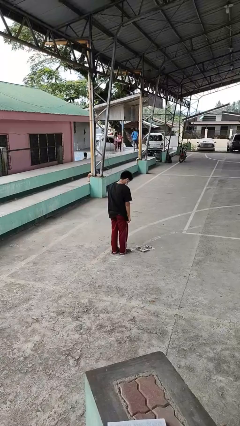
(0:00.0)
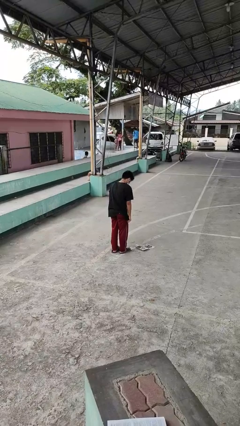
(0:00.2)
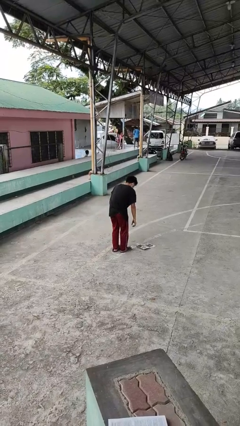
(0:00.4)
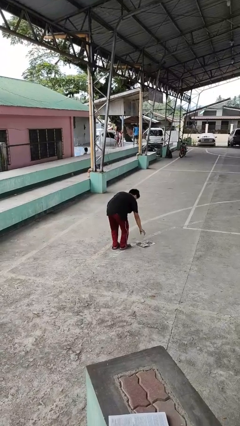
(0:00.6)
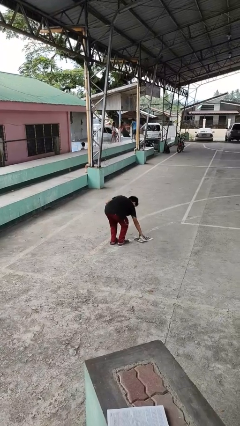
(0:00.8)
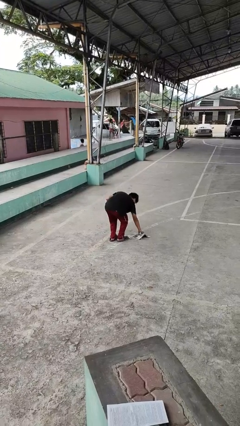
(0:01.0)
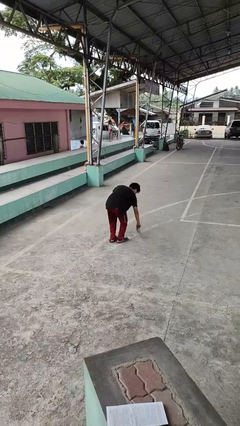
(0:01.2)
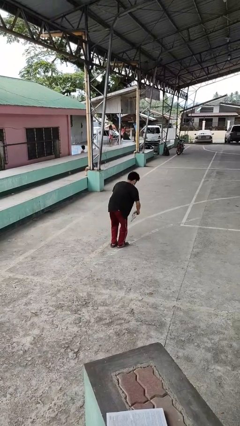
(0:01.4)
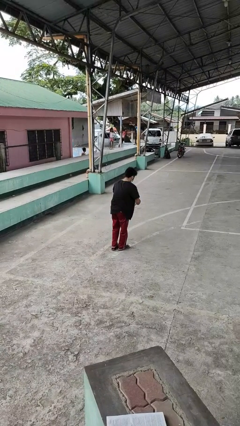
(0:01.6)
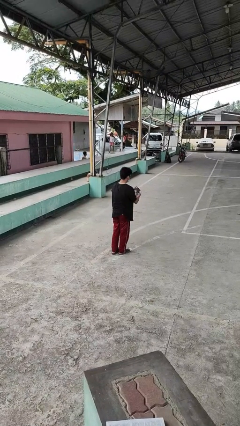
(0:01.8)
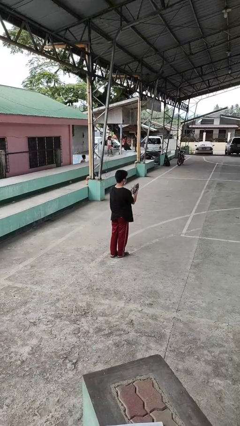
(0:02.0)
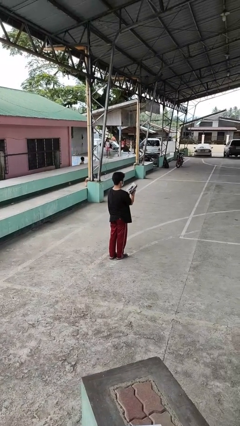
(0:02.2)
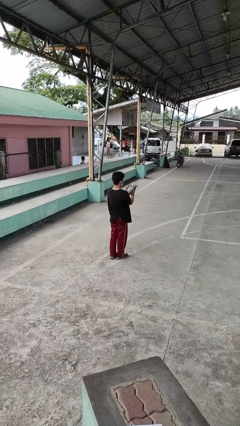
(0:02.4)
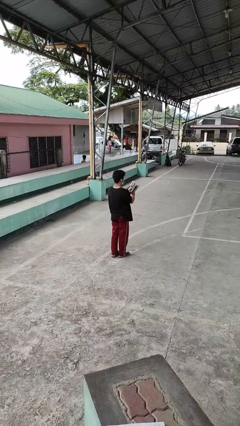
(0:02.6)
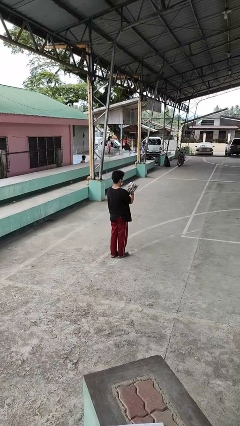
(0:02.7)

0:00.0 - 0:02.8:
person picks up object from floor

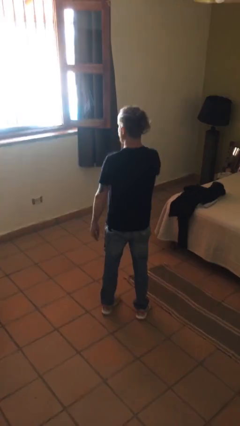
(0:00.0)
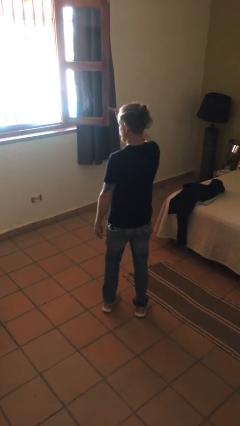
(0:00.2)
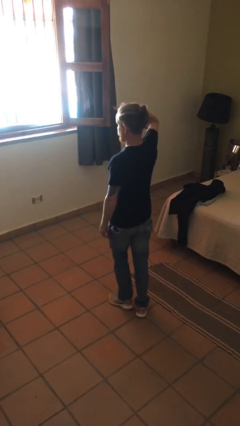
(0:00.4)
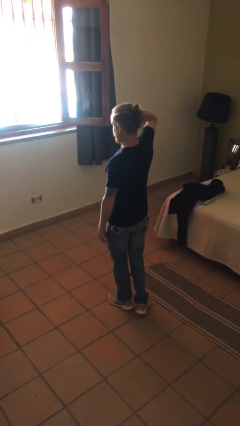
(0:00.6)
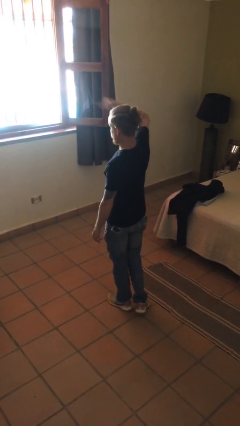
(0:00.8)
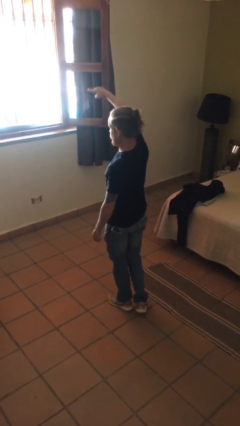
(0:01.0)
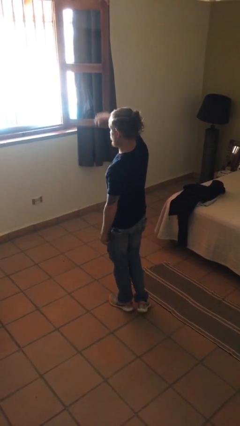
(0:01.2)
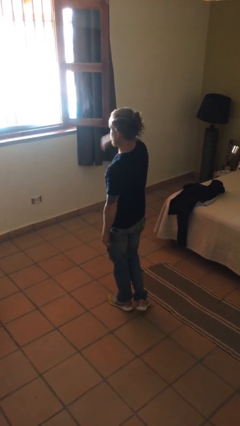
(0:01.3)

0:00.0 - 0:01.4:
person salutes

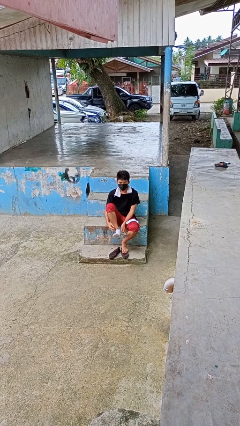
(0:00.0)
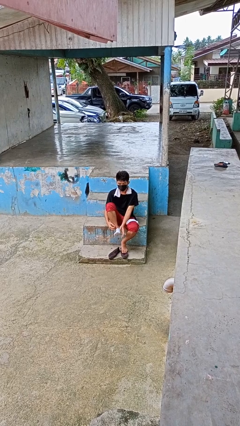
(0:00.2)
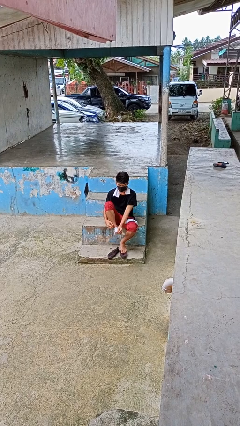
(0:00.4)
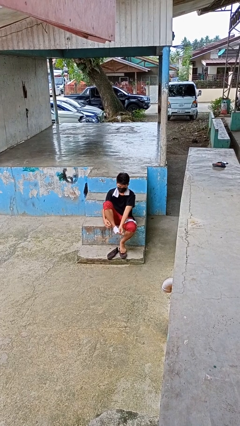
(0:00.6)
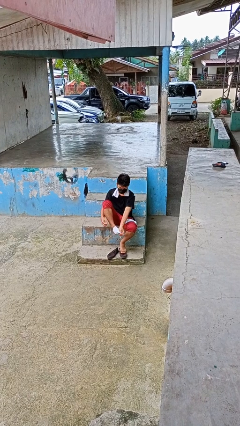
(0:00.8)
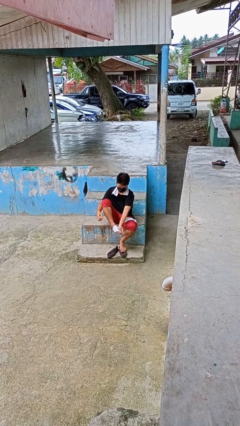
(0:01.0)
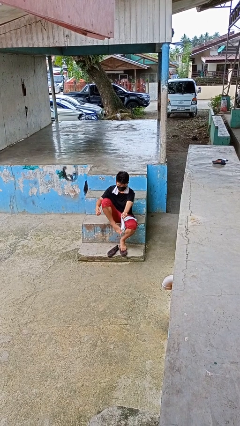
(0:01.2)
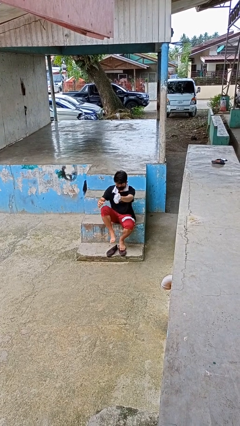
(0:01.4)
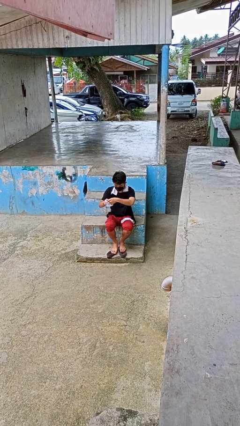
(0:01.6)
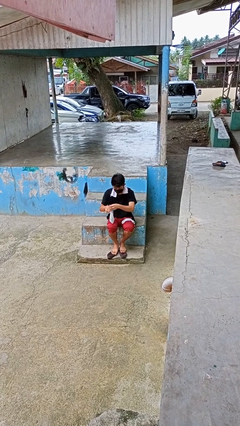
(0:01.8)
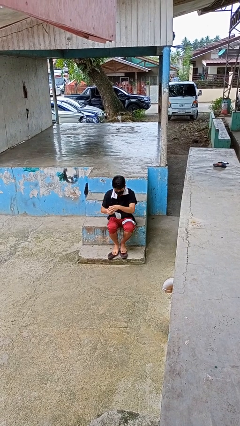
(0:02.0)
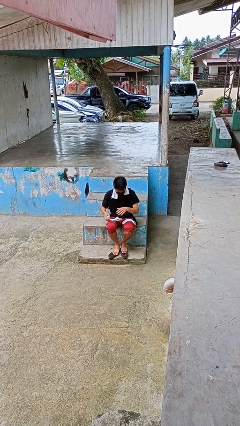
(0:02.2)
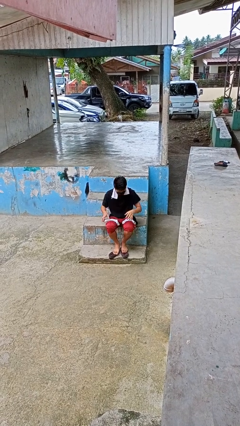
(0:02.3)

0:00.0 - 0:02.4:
person takes off socks

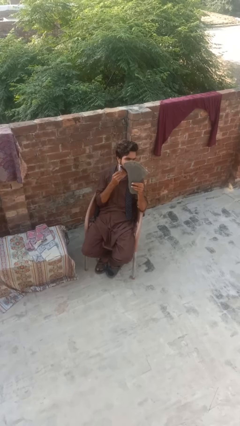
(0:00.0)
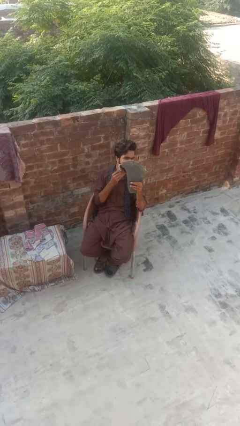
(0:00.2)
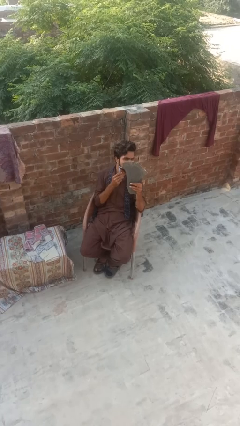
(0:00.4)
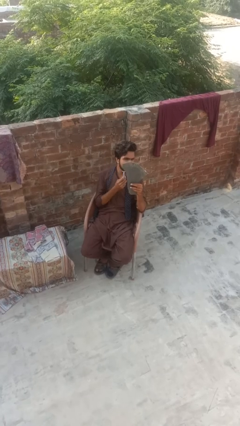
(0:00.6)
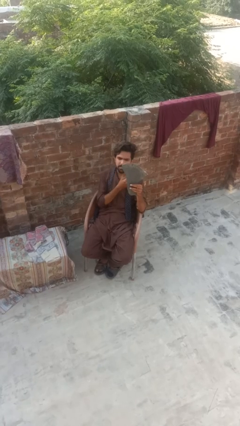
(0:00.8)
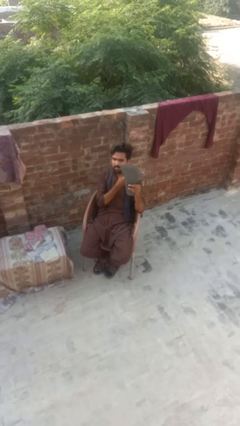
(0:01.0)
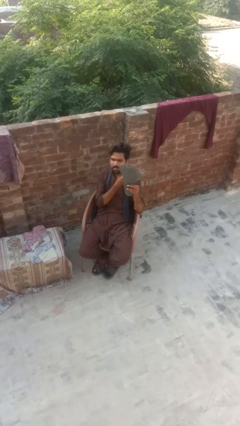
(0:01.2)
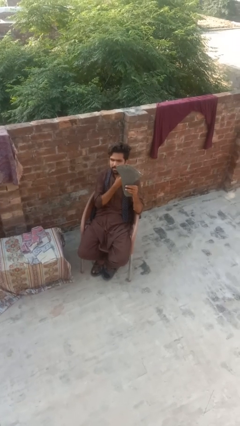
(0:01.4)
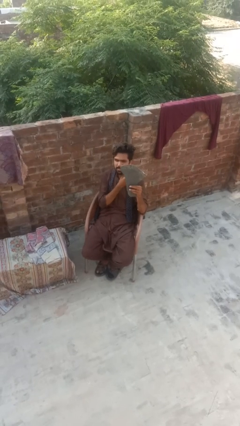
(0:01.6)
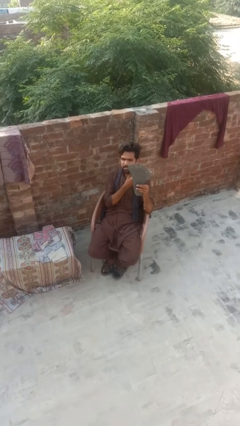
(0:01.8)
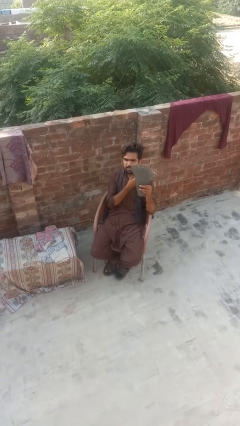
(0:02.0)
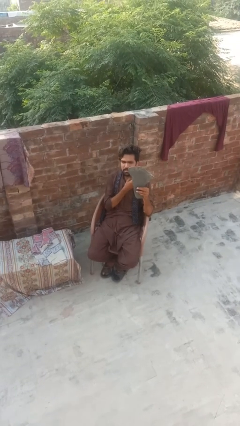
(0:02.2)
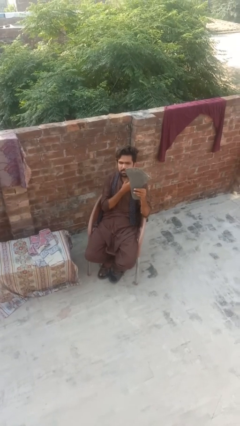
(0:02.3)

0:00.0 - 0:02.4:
person shaves face

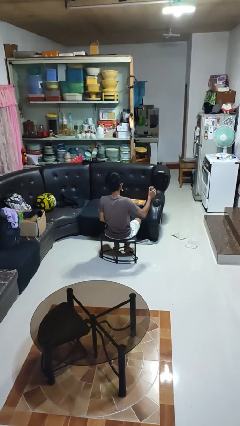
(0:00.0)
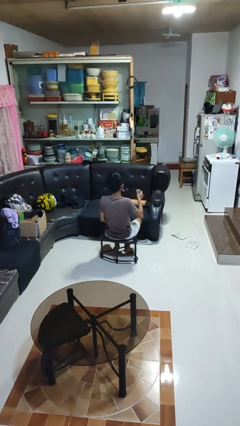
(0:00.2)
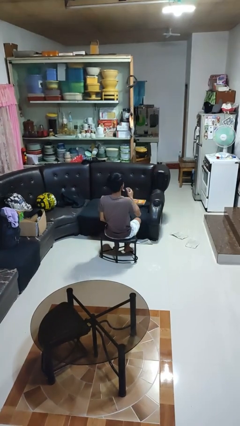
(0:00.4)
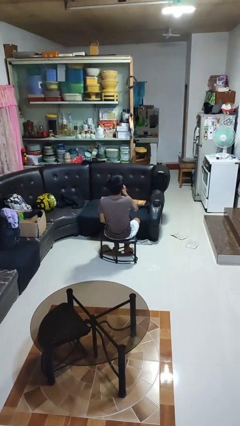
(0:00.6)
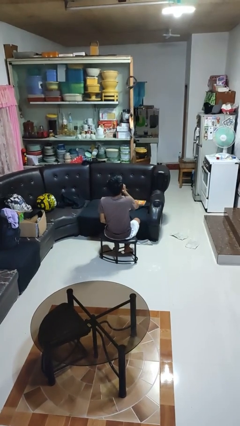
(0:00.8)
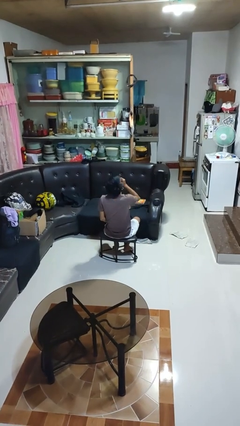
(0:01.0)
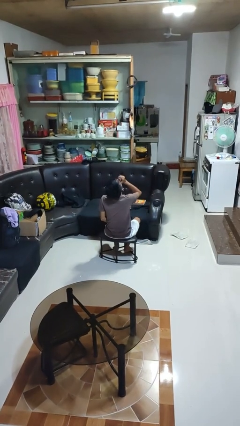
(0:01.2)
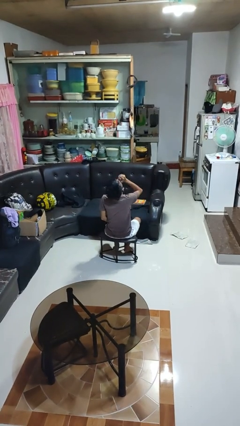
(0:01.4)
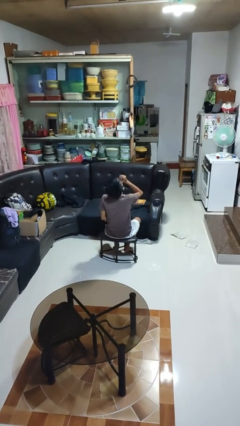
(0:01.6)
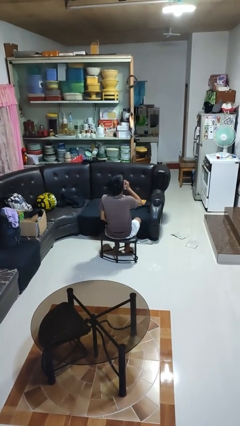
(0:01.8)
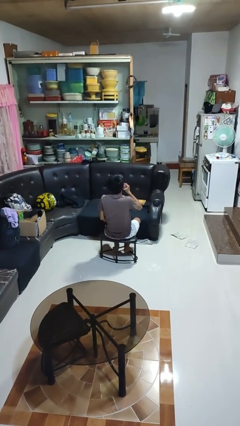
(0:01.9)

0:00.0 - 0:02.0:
person drinks from beverage can

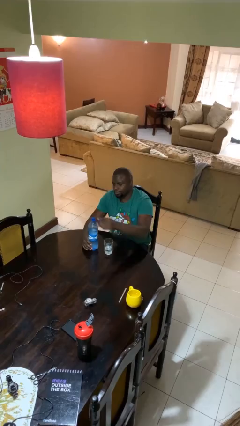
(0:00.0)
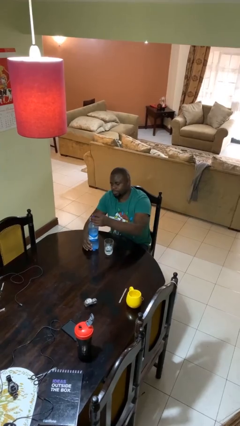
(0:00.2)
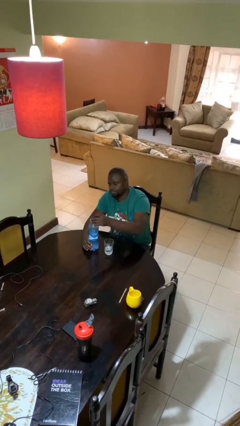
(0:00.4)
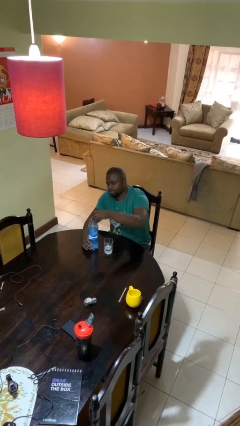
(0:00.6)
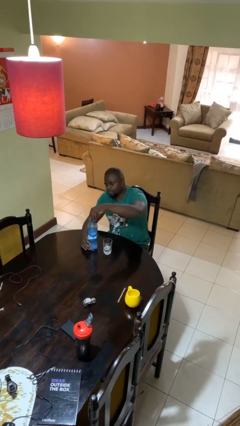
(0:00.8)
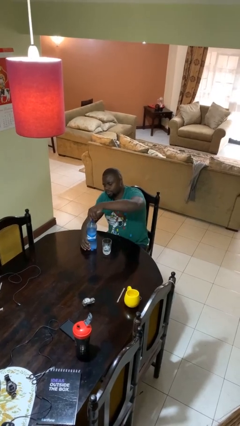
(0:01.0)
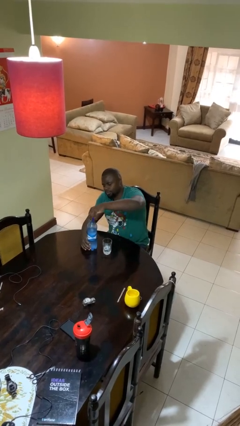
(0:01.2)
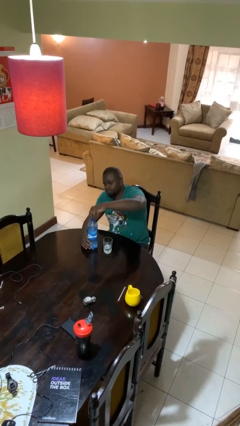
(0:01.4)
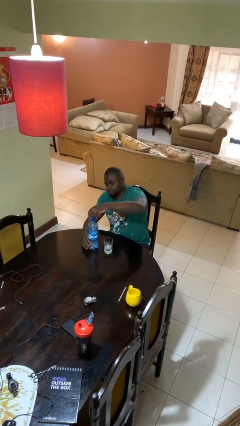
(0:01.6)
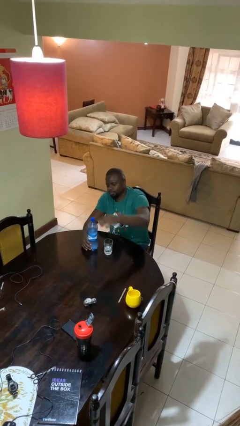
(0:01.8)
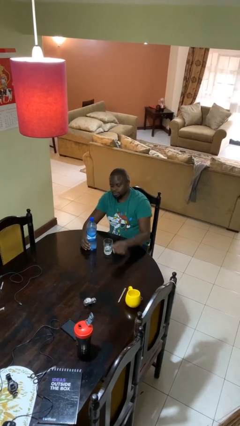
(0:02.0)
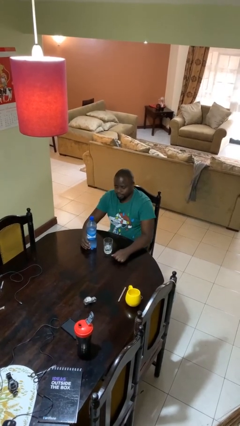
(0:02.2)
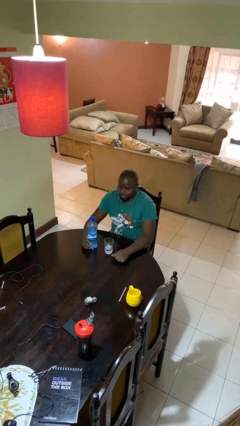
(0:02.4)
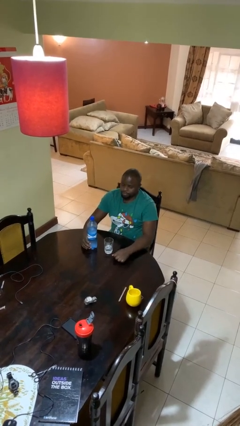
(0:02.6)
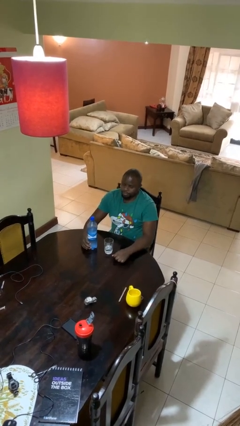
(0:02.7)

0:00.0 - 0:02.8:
person screws lid to bottle

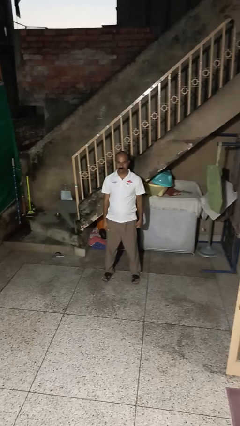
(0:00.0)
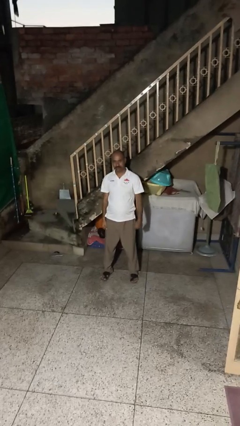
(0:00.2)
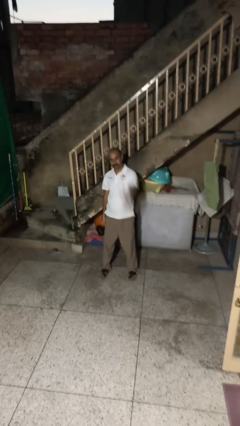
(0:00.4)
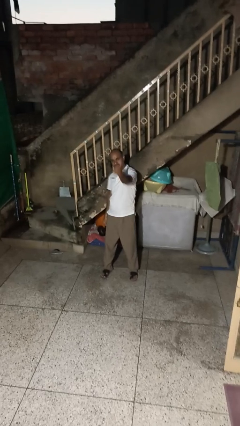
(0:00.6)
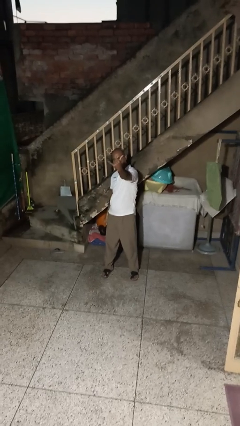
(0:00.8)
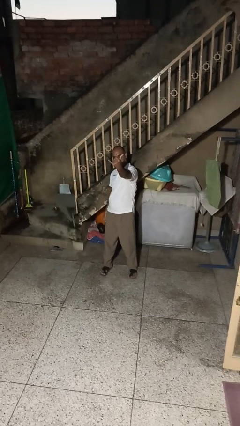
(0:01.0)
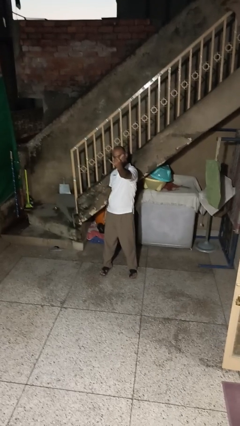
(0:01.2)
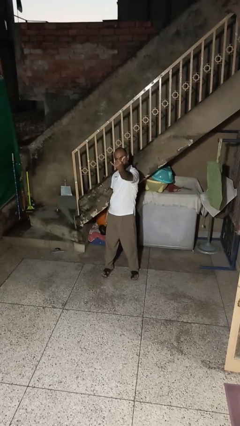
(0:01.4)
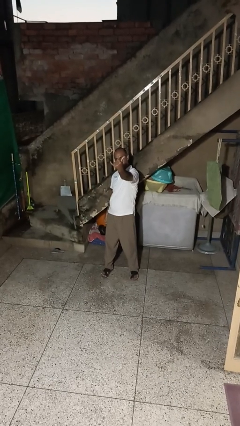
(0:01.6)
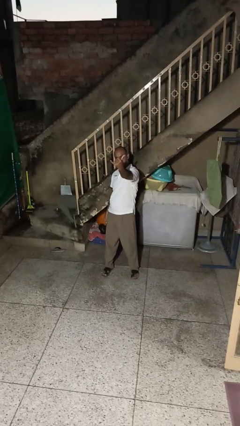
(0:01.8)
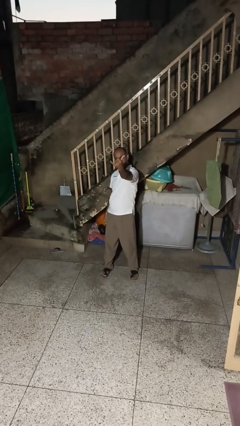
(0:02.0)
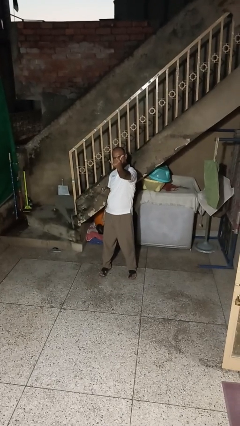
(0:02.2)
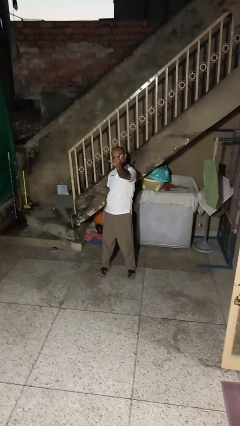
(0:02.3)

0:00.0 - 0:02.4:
person gestures hang loose

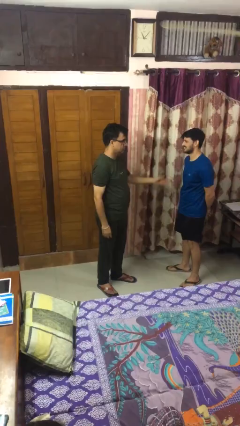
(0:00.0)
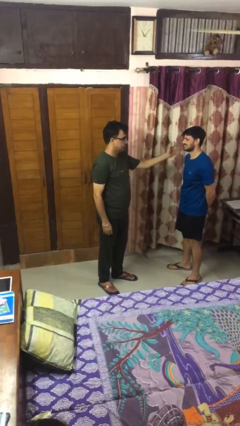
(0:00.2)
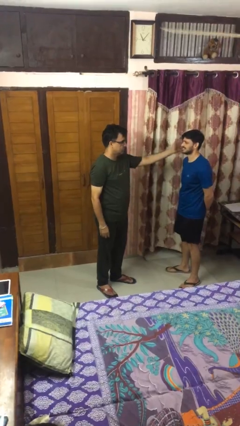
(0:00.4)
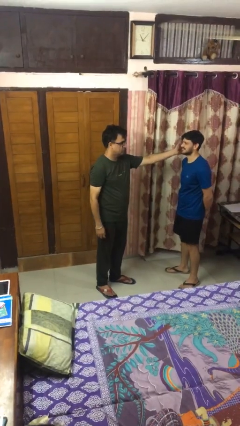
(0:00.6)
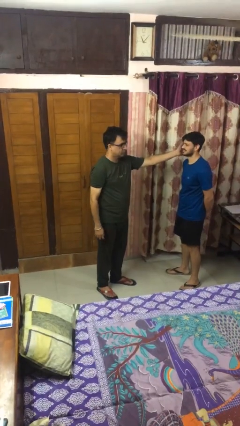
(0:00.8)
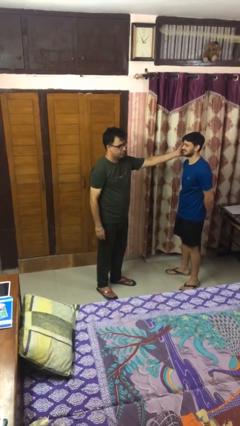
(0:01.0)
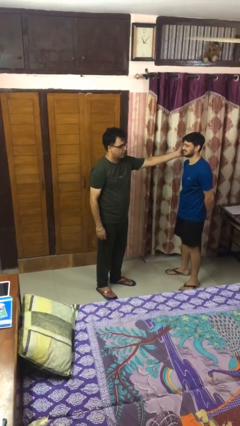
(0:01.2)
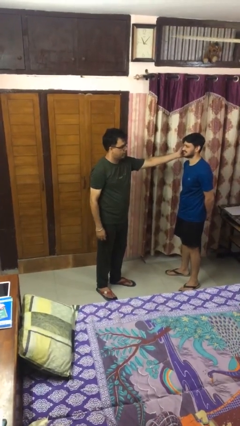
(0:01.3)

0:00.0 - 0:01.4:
person touches face of person
